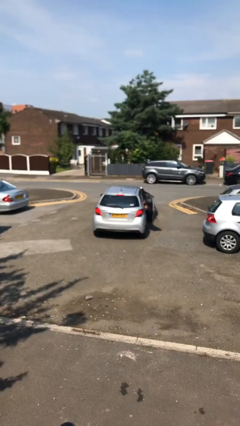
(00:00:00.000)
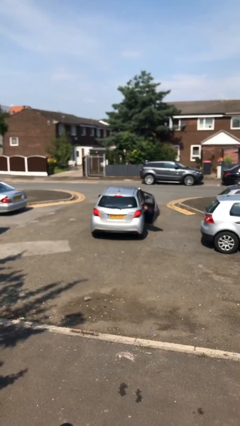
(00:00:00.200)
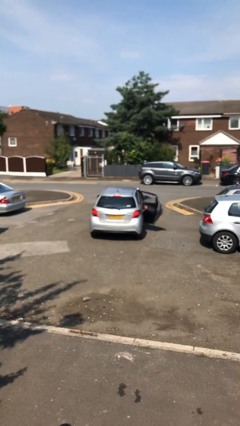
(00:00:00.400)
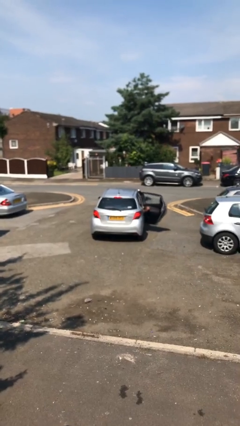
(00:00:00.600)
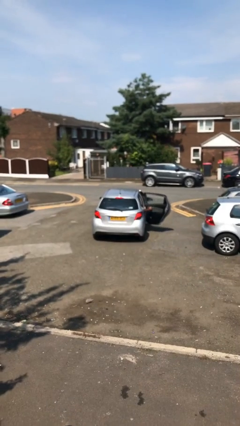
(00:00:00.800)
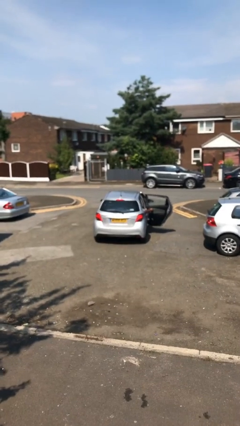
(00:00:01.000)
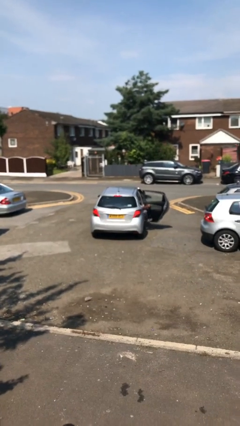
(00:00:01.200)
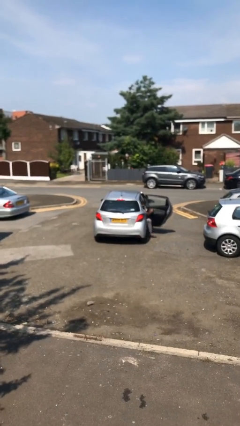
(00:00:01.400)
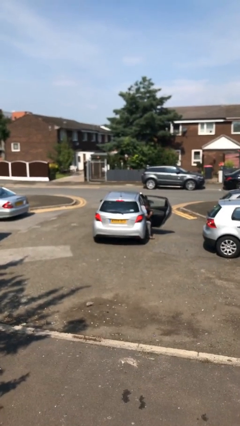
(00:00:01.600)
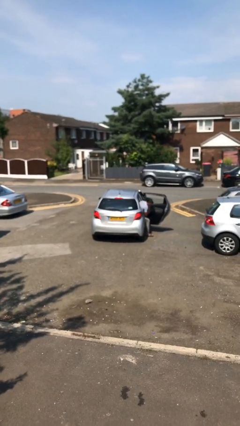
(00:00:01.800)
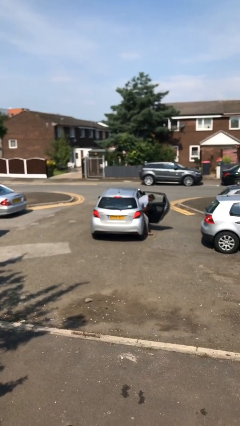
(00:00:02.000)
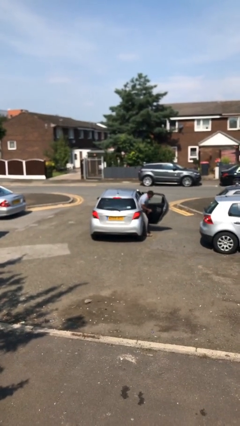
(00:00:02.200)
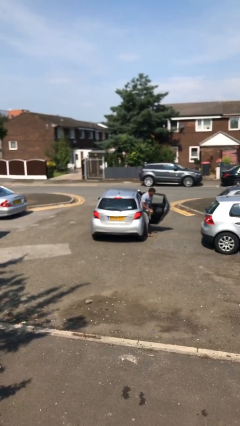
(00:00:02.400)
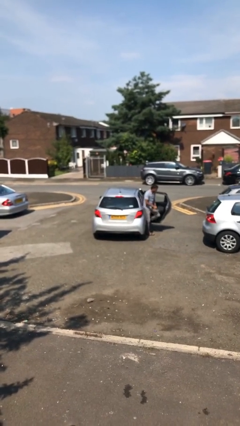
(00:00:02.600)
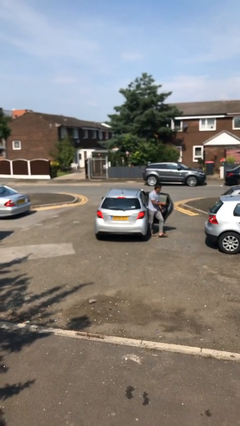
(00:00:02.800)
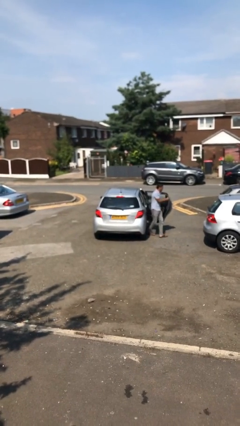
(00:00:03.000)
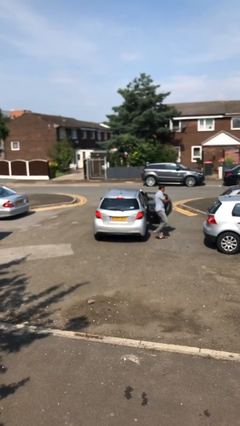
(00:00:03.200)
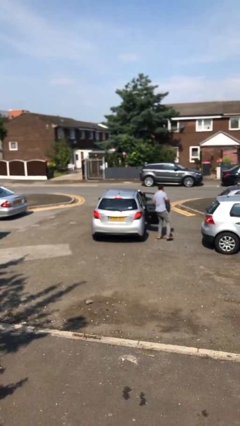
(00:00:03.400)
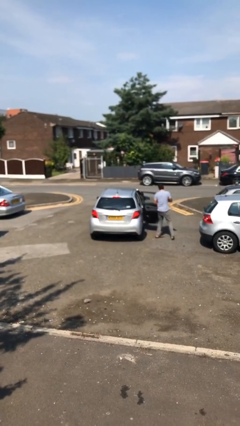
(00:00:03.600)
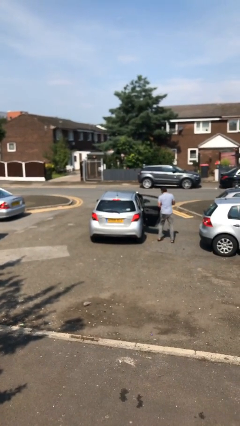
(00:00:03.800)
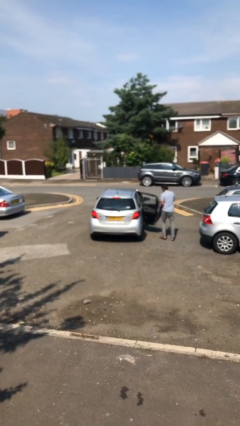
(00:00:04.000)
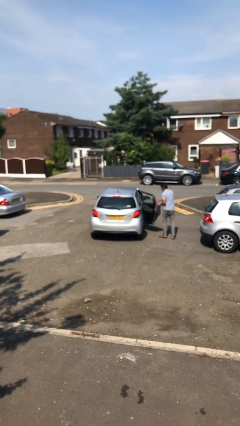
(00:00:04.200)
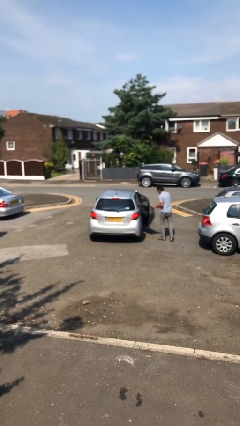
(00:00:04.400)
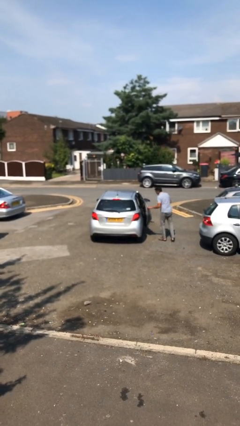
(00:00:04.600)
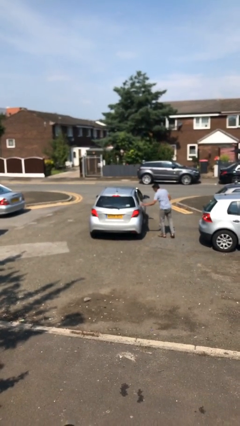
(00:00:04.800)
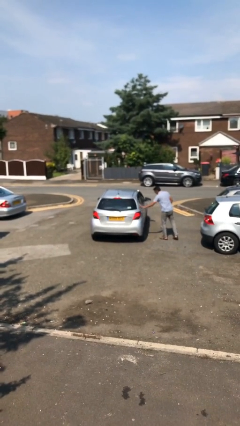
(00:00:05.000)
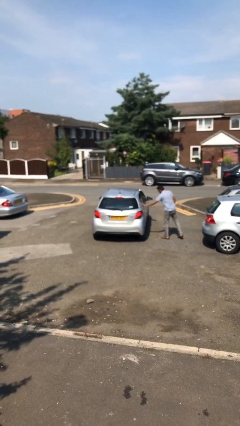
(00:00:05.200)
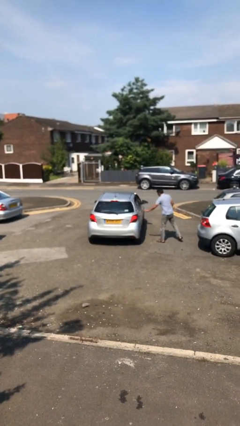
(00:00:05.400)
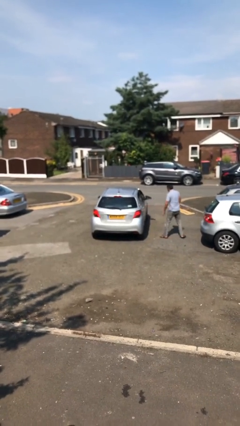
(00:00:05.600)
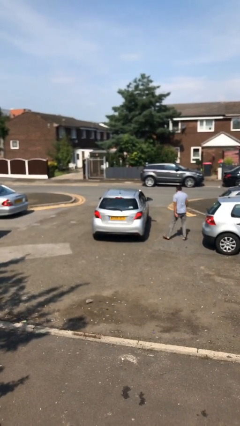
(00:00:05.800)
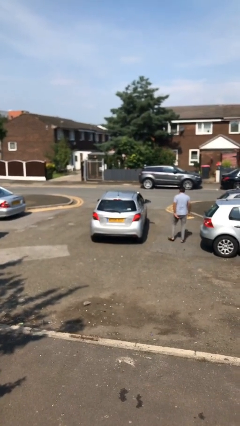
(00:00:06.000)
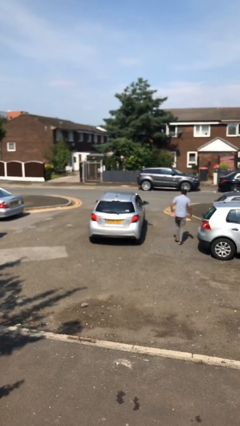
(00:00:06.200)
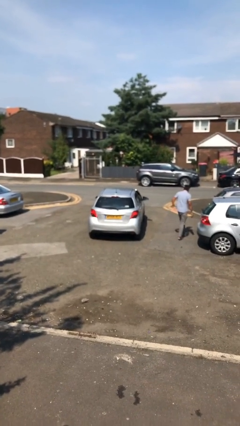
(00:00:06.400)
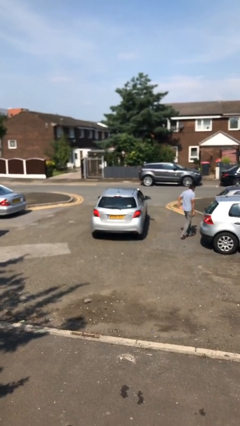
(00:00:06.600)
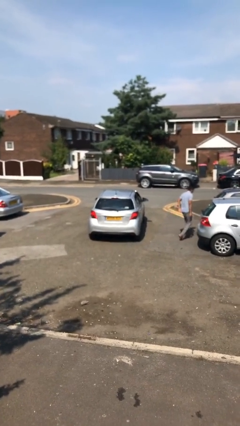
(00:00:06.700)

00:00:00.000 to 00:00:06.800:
car drops off person

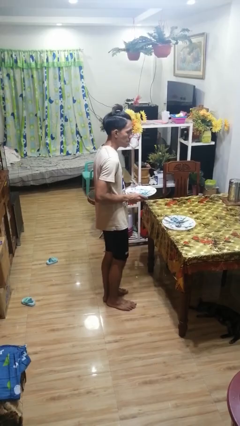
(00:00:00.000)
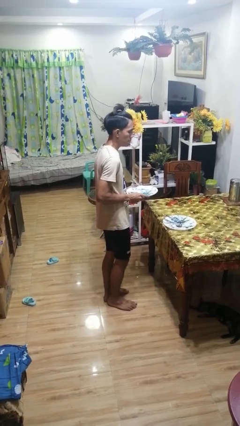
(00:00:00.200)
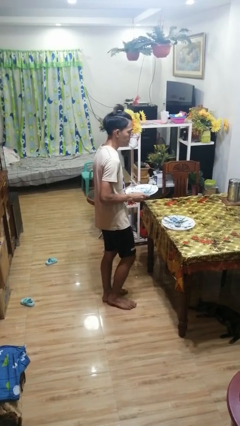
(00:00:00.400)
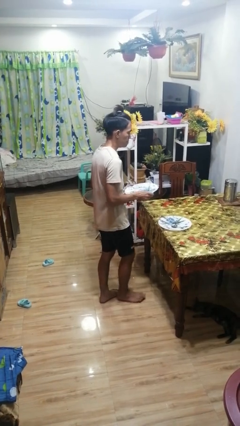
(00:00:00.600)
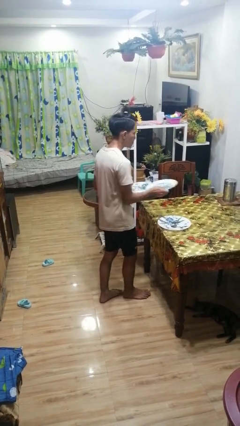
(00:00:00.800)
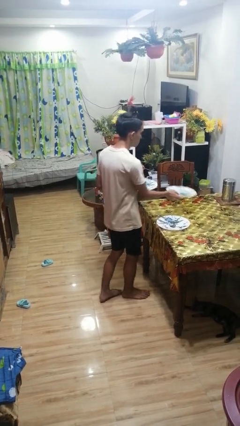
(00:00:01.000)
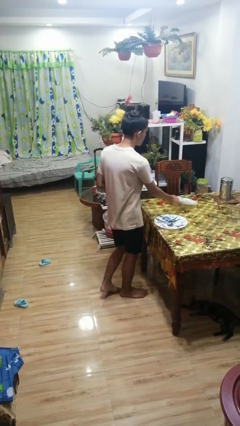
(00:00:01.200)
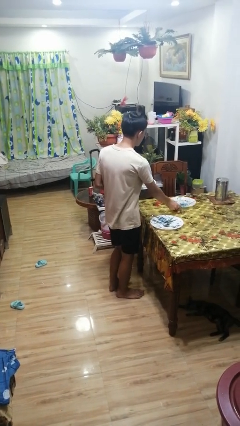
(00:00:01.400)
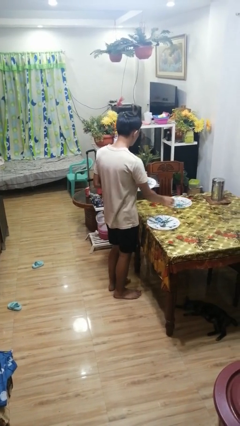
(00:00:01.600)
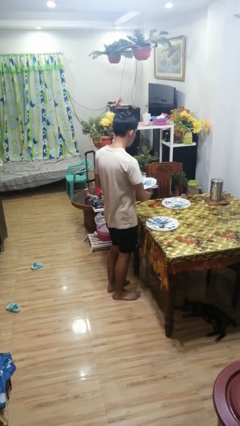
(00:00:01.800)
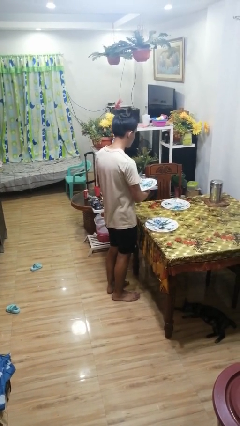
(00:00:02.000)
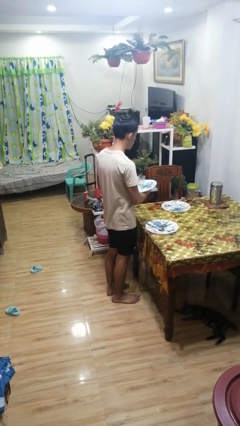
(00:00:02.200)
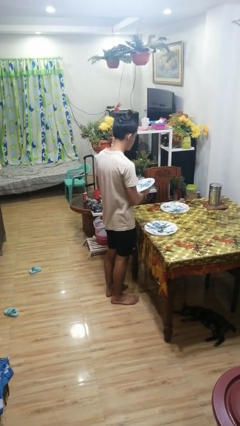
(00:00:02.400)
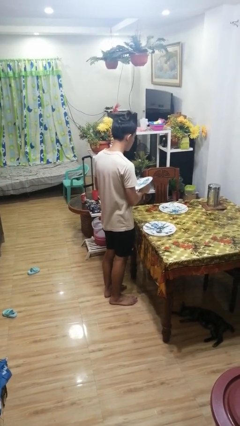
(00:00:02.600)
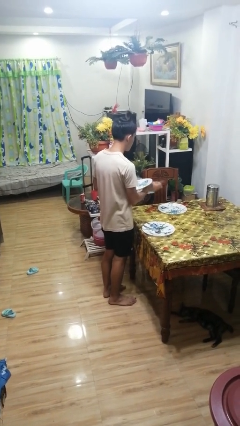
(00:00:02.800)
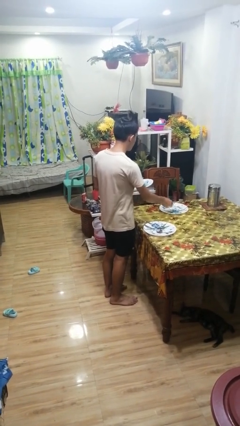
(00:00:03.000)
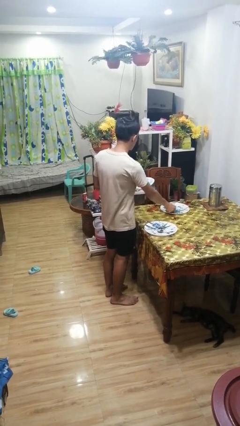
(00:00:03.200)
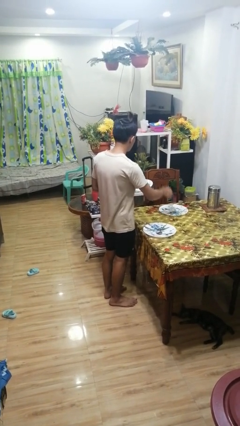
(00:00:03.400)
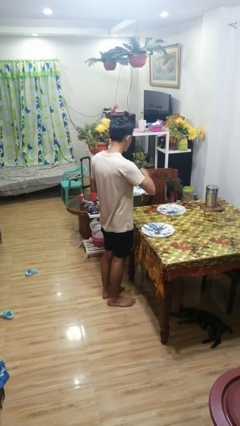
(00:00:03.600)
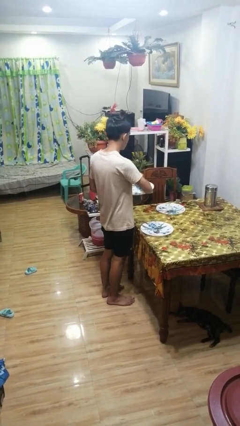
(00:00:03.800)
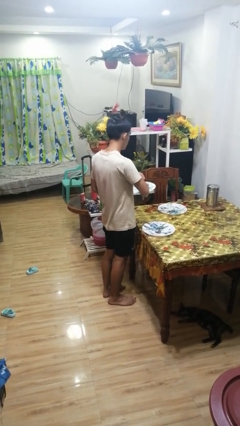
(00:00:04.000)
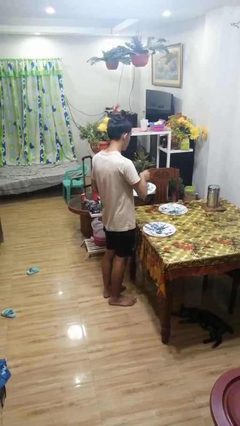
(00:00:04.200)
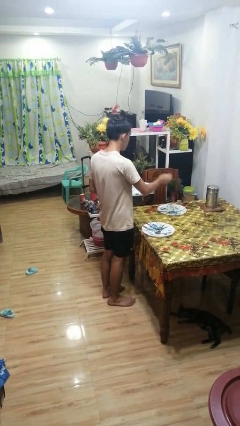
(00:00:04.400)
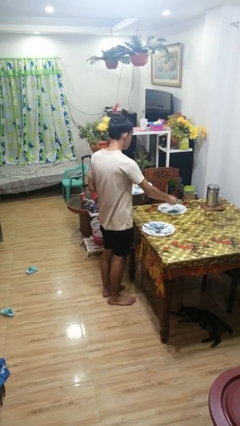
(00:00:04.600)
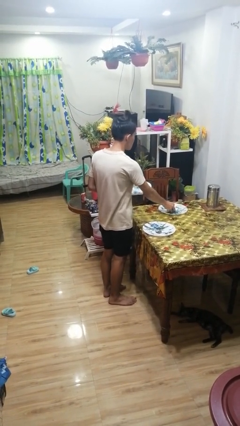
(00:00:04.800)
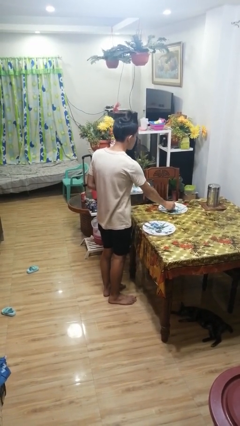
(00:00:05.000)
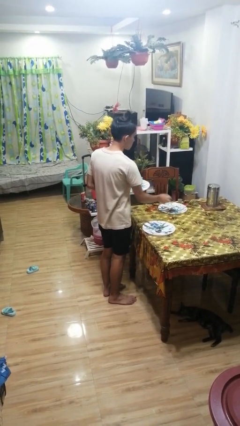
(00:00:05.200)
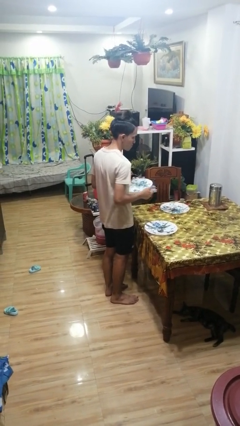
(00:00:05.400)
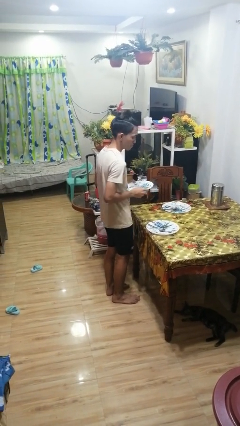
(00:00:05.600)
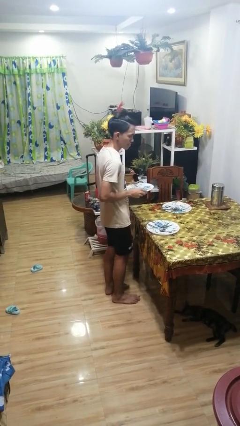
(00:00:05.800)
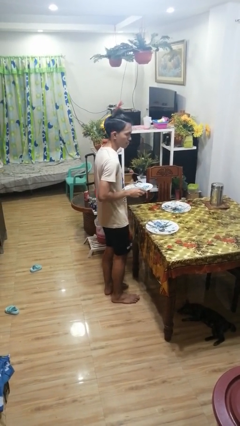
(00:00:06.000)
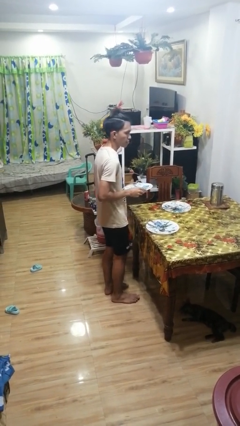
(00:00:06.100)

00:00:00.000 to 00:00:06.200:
person sets table

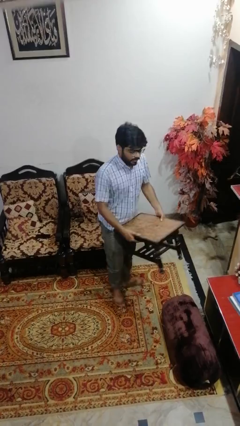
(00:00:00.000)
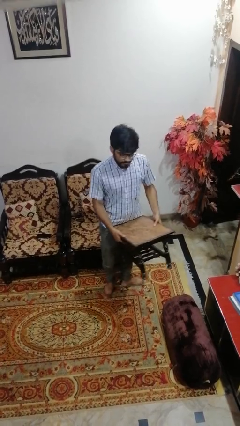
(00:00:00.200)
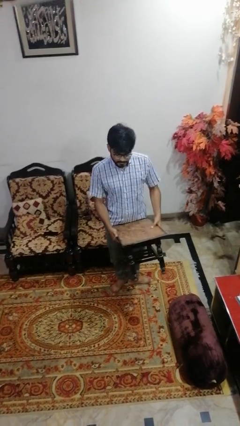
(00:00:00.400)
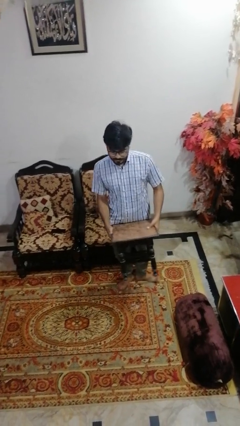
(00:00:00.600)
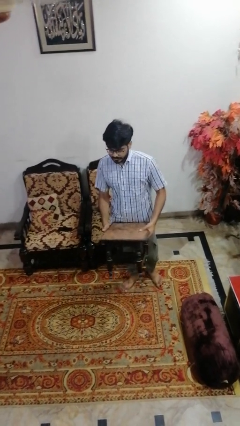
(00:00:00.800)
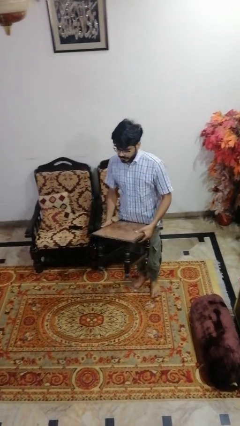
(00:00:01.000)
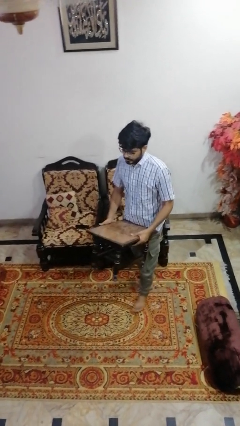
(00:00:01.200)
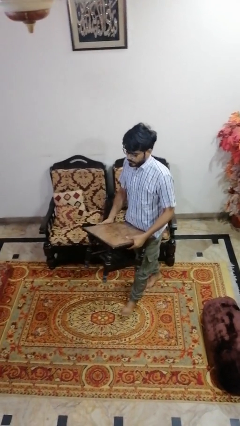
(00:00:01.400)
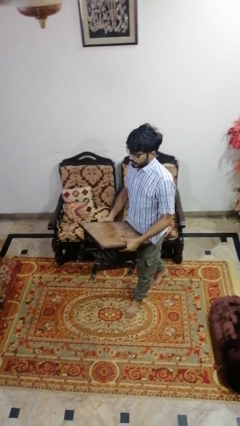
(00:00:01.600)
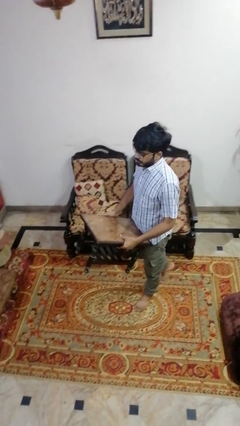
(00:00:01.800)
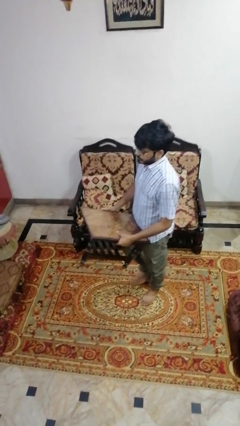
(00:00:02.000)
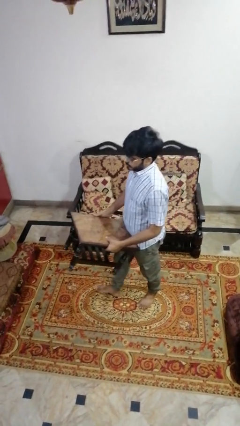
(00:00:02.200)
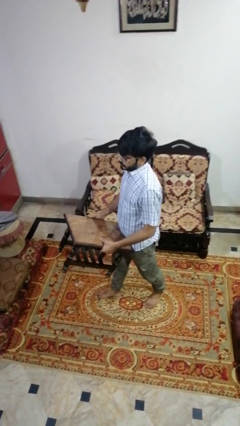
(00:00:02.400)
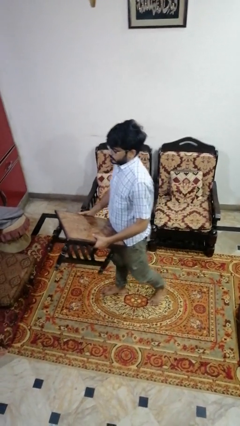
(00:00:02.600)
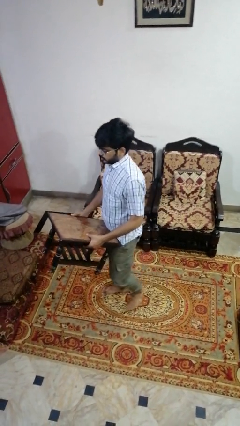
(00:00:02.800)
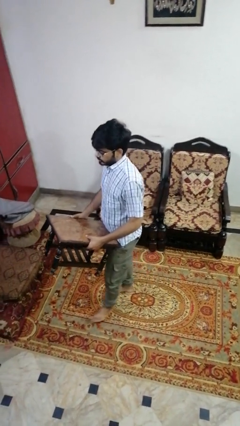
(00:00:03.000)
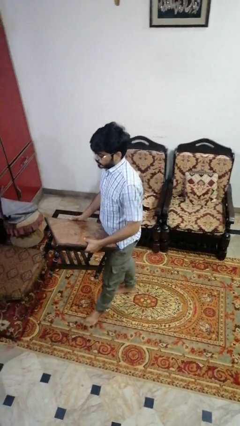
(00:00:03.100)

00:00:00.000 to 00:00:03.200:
person carries furniture

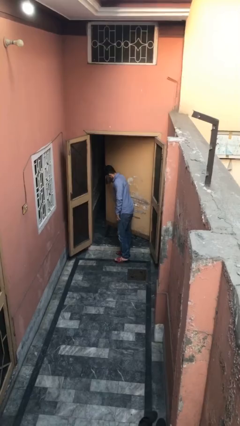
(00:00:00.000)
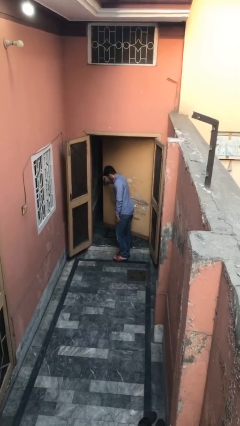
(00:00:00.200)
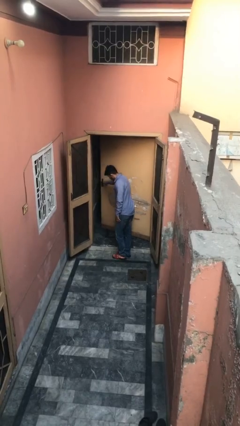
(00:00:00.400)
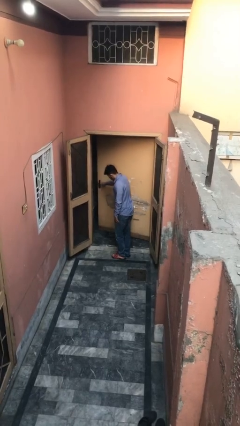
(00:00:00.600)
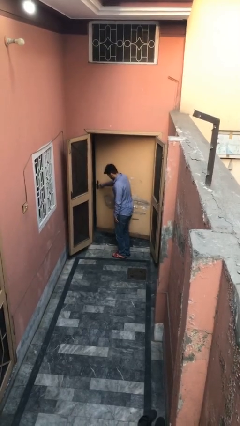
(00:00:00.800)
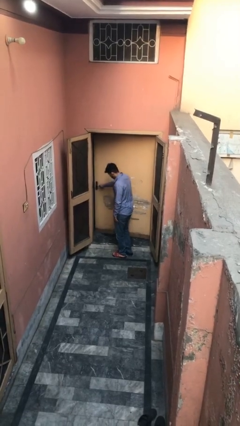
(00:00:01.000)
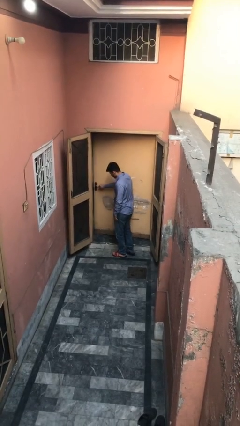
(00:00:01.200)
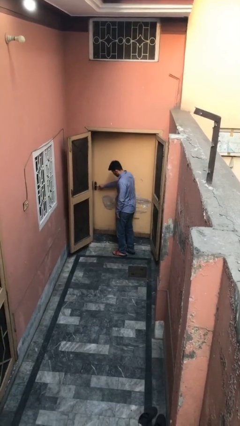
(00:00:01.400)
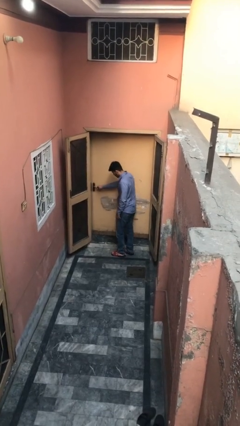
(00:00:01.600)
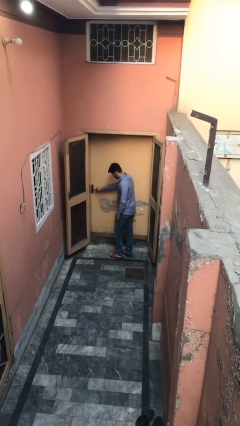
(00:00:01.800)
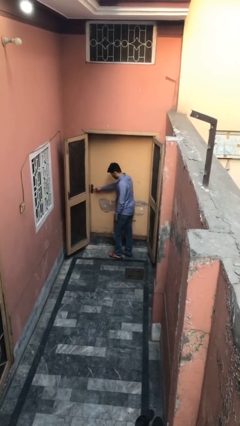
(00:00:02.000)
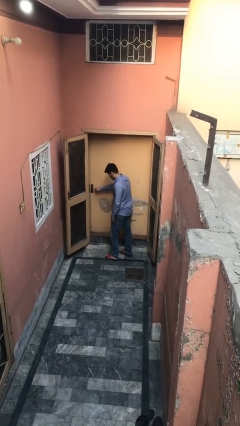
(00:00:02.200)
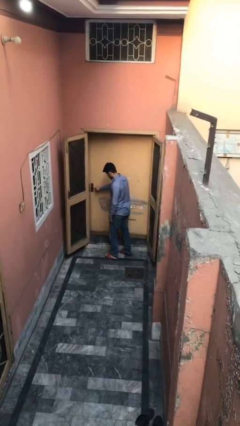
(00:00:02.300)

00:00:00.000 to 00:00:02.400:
person closes facility door
